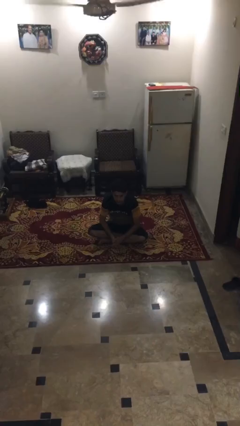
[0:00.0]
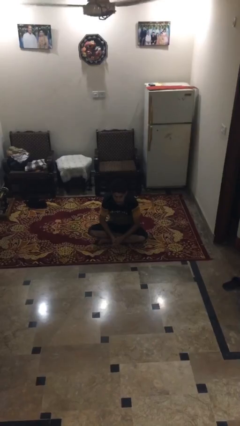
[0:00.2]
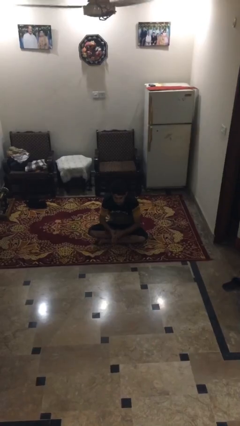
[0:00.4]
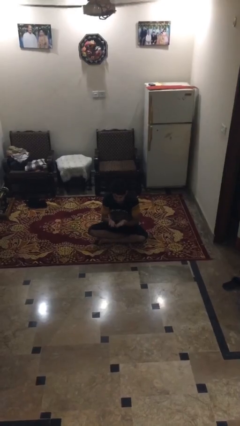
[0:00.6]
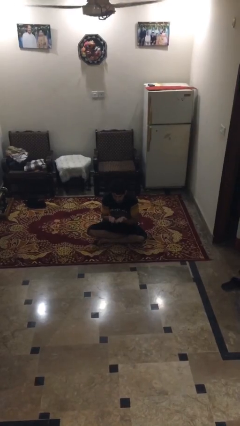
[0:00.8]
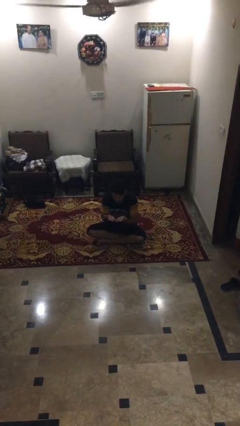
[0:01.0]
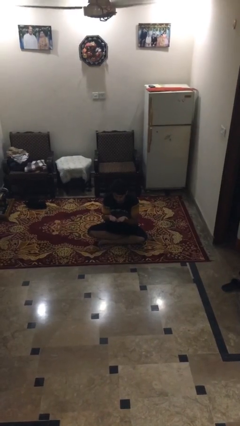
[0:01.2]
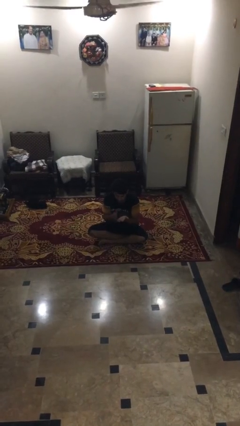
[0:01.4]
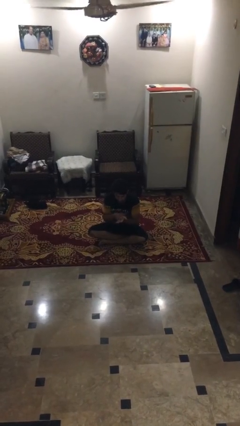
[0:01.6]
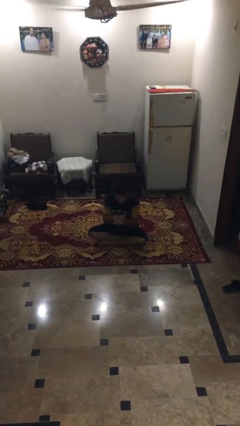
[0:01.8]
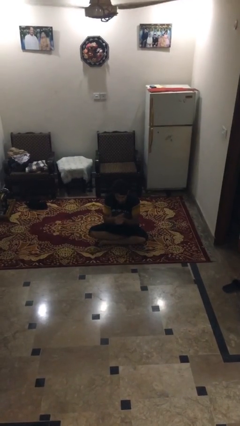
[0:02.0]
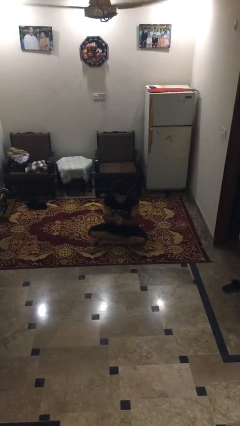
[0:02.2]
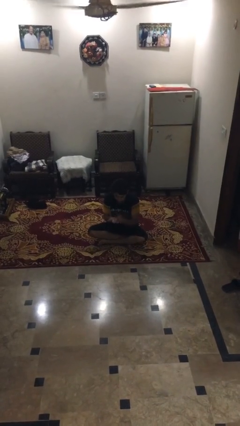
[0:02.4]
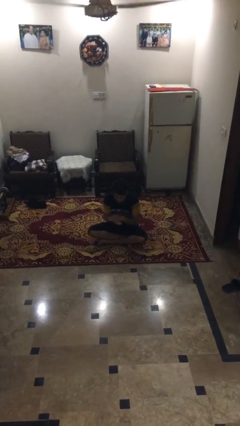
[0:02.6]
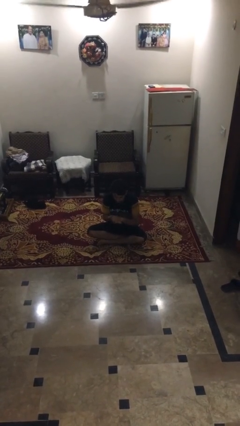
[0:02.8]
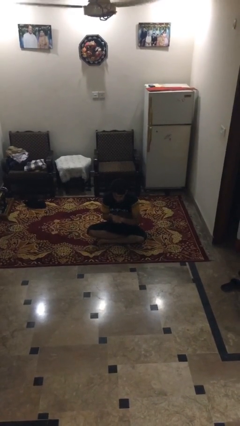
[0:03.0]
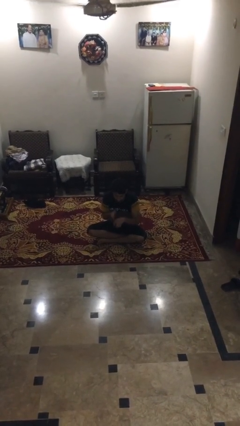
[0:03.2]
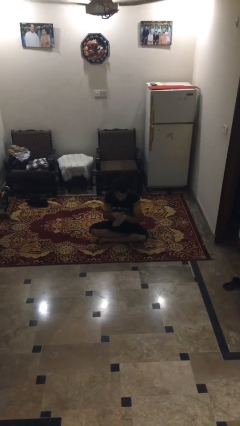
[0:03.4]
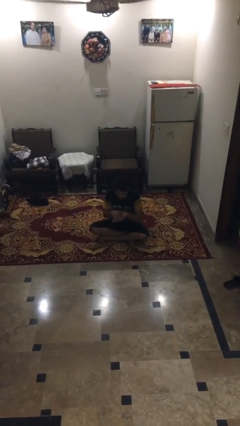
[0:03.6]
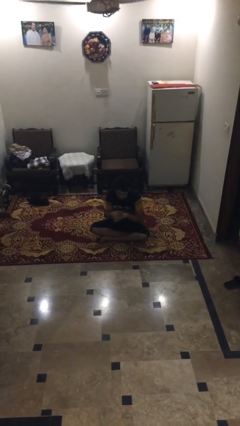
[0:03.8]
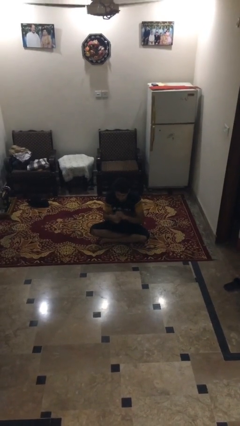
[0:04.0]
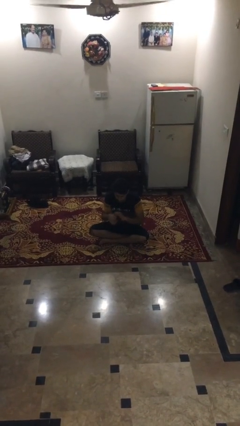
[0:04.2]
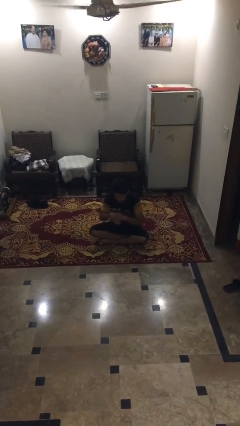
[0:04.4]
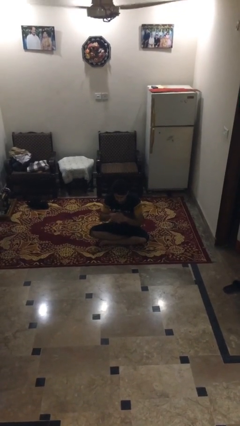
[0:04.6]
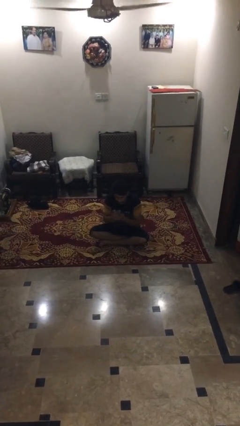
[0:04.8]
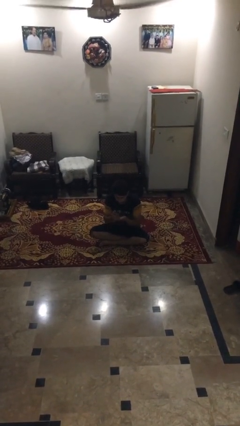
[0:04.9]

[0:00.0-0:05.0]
person looks at hands in lap

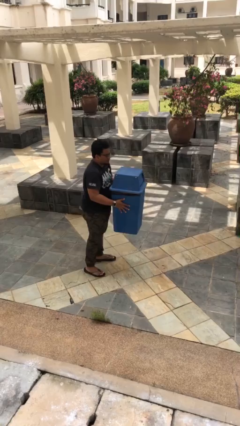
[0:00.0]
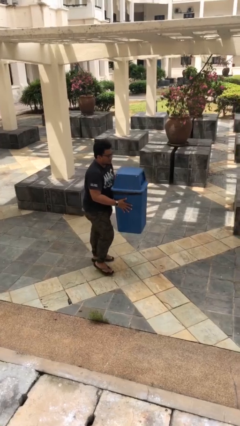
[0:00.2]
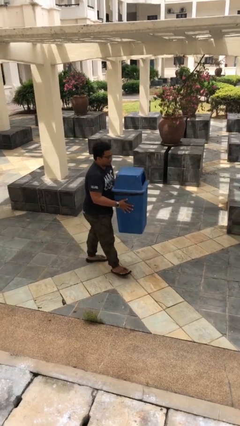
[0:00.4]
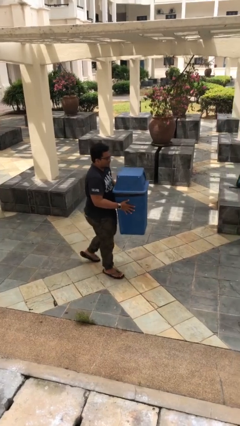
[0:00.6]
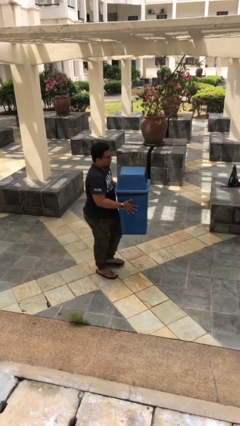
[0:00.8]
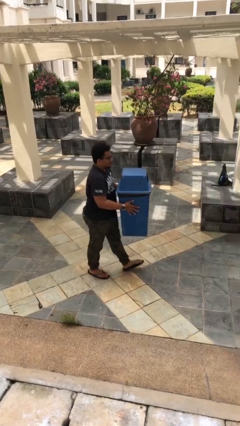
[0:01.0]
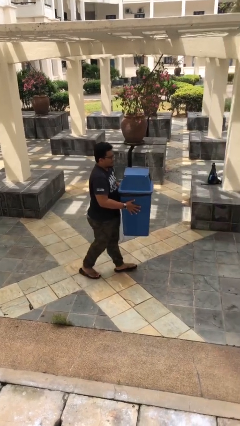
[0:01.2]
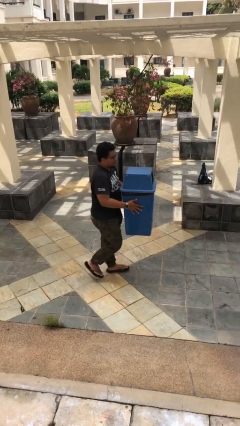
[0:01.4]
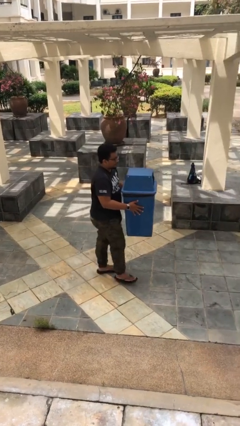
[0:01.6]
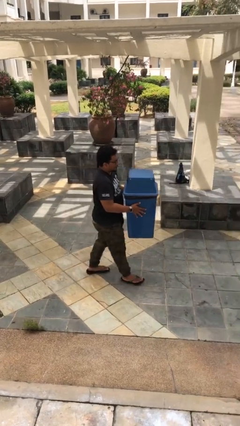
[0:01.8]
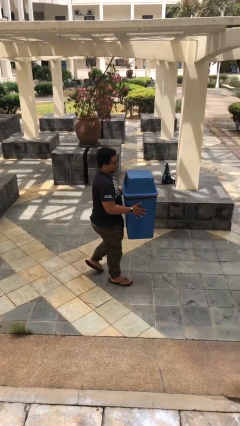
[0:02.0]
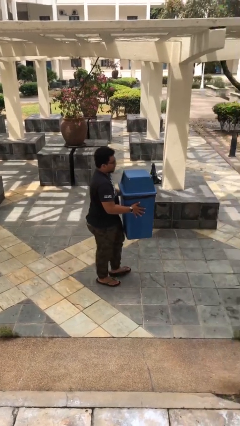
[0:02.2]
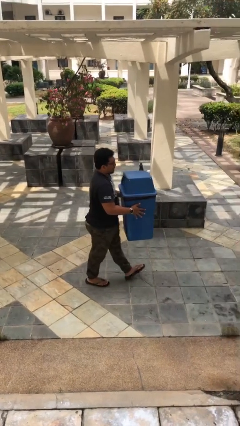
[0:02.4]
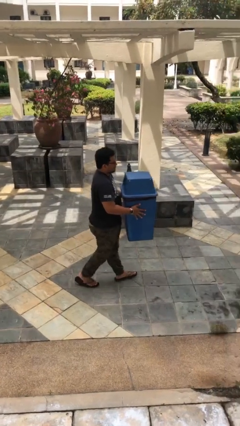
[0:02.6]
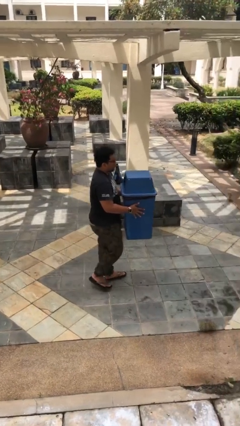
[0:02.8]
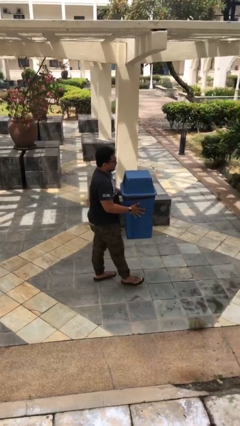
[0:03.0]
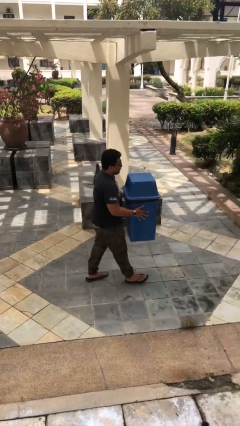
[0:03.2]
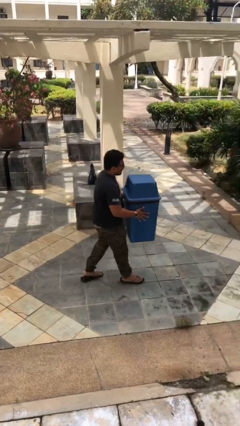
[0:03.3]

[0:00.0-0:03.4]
person carries heavy object

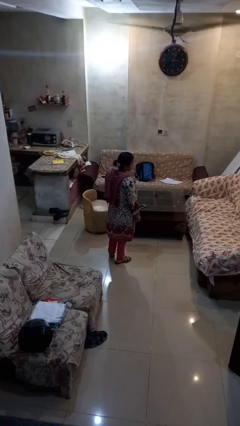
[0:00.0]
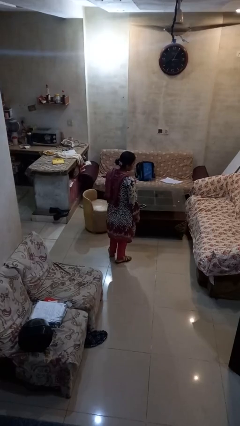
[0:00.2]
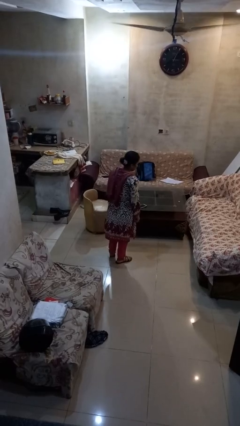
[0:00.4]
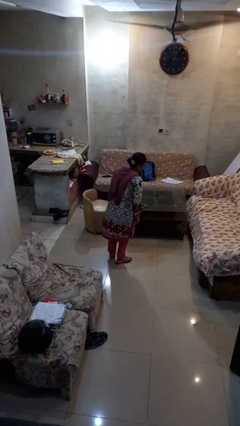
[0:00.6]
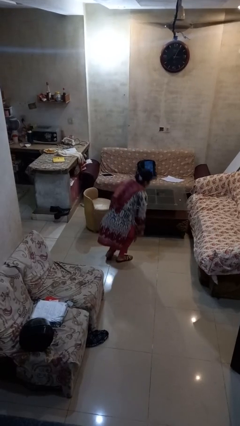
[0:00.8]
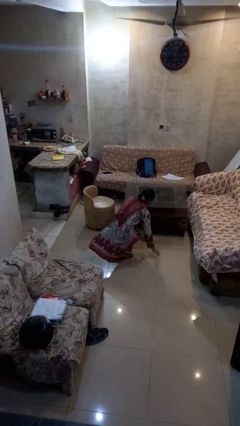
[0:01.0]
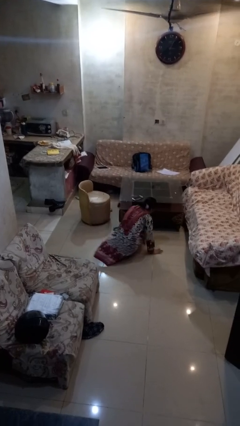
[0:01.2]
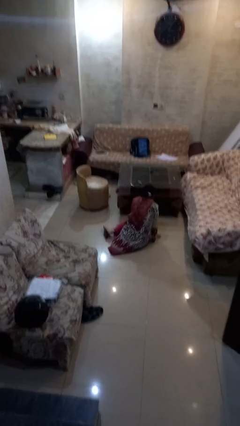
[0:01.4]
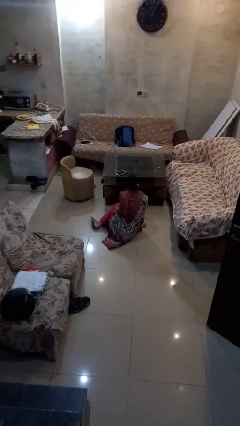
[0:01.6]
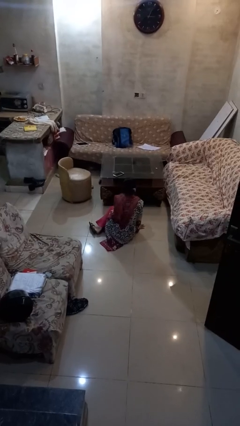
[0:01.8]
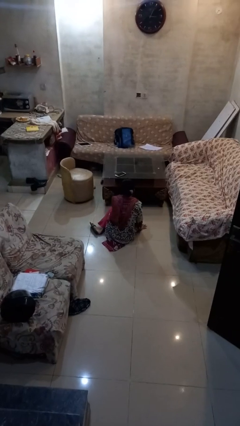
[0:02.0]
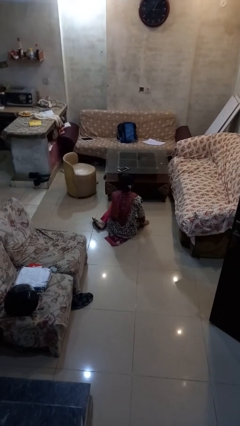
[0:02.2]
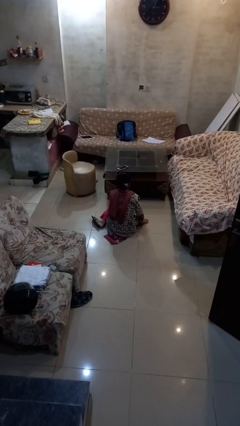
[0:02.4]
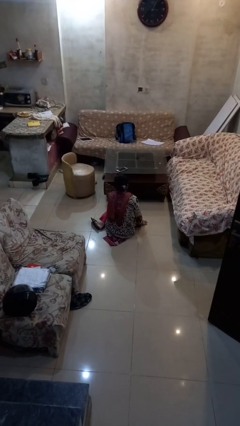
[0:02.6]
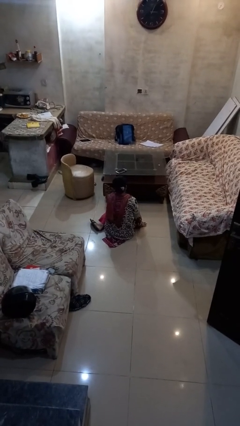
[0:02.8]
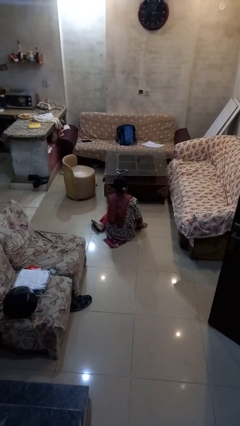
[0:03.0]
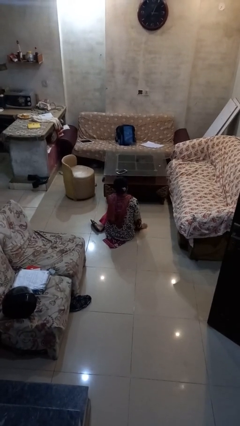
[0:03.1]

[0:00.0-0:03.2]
person falls while standing

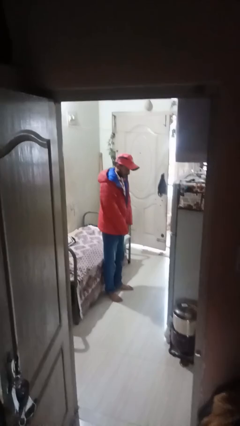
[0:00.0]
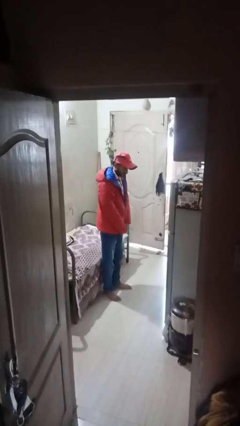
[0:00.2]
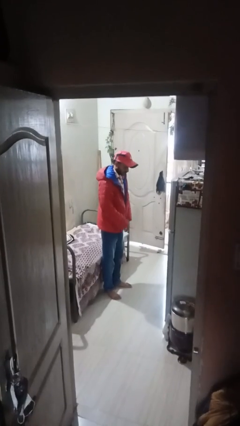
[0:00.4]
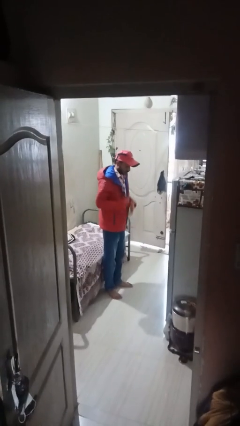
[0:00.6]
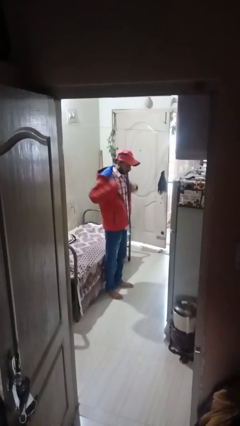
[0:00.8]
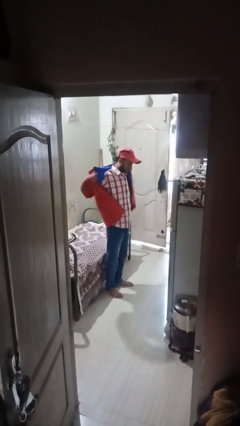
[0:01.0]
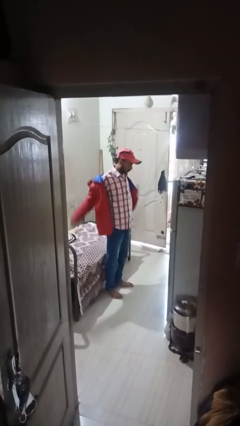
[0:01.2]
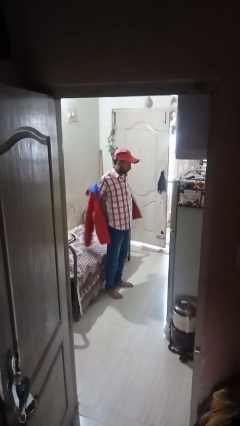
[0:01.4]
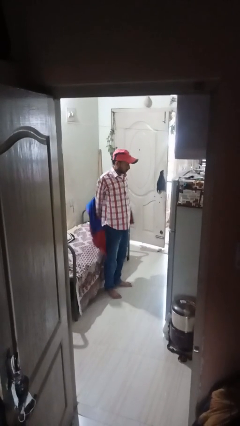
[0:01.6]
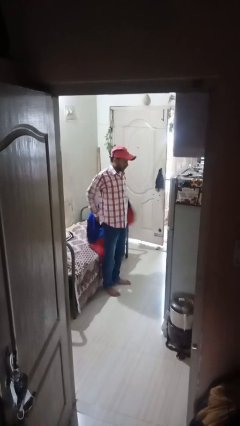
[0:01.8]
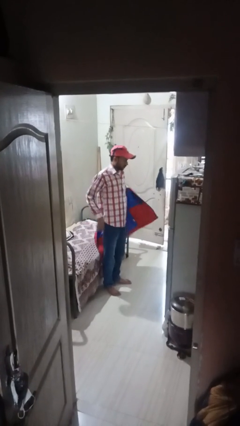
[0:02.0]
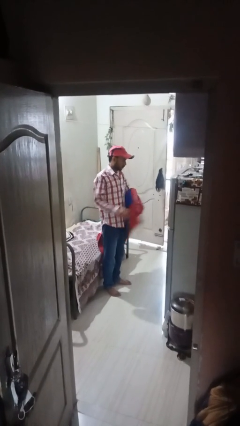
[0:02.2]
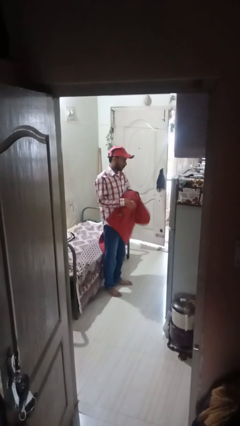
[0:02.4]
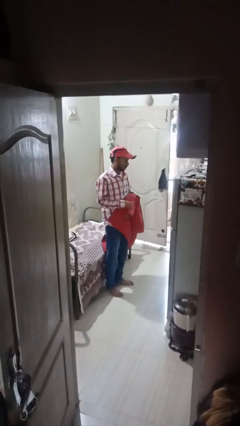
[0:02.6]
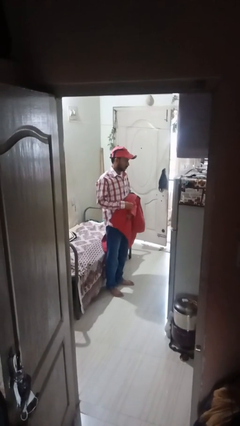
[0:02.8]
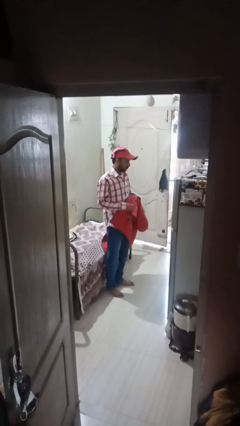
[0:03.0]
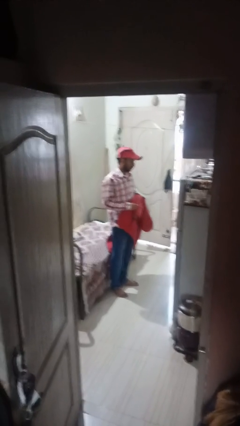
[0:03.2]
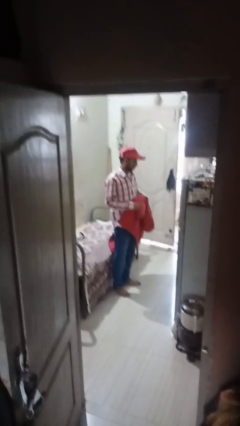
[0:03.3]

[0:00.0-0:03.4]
person takes off jacket

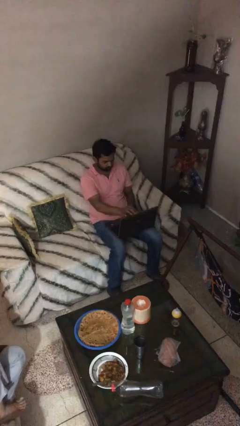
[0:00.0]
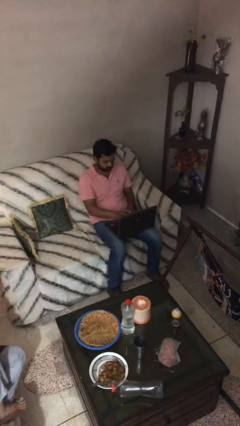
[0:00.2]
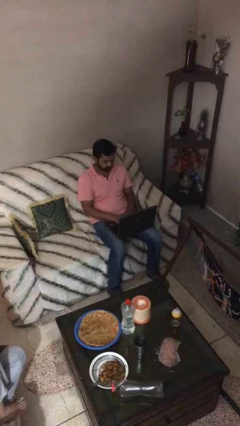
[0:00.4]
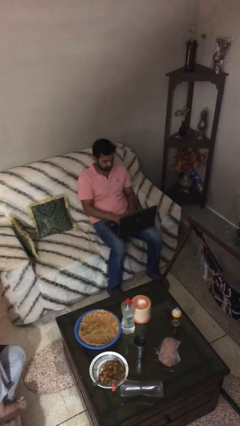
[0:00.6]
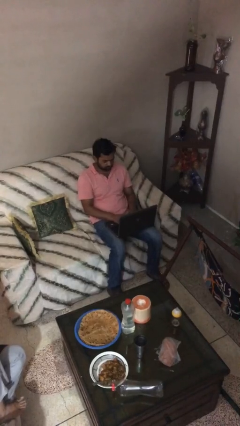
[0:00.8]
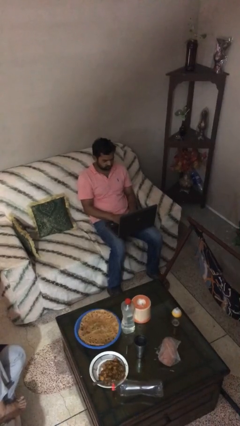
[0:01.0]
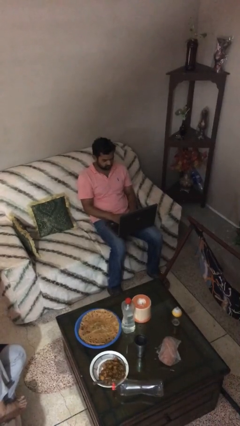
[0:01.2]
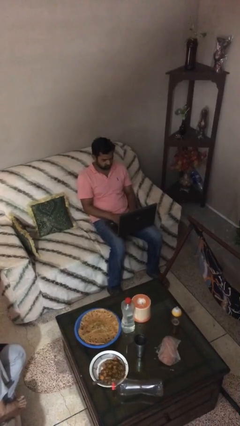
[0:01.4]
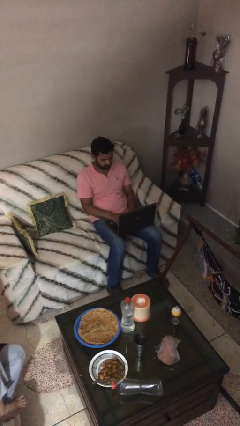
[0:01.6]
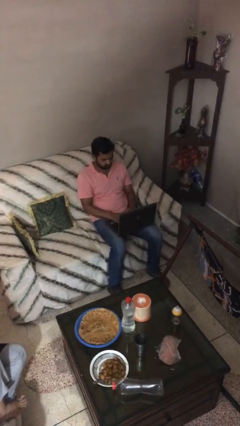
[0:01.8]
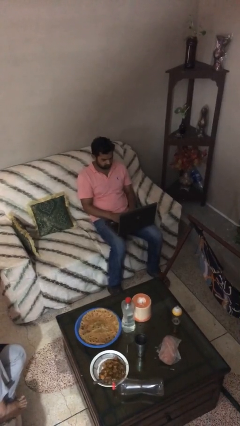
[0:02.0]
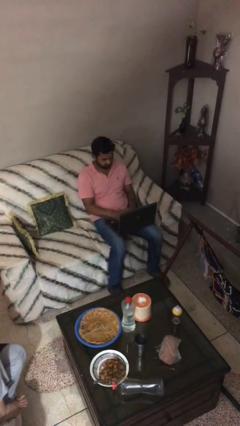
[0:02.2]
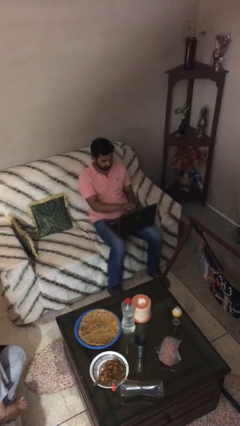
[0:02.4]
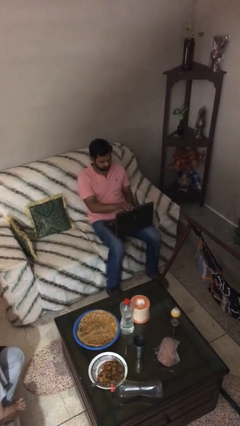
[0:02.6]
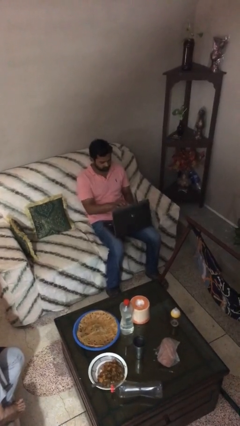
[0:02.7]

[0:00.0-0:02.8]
person interacts with laptop
